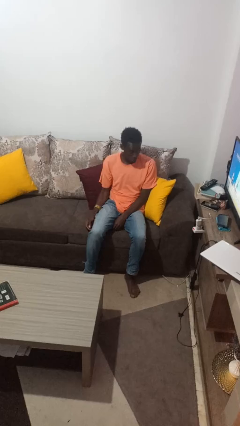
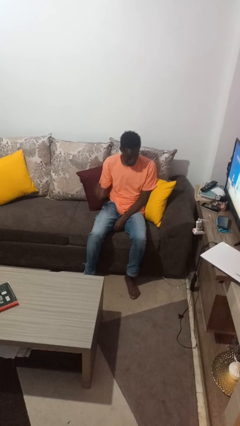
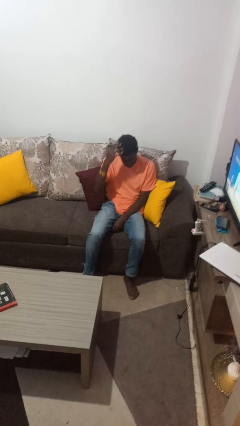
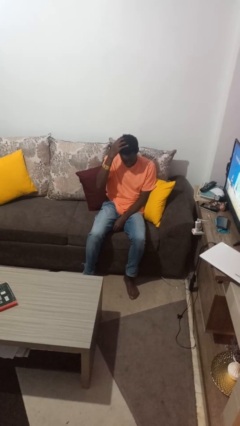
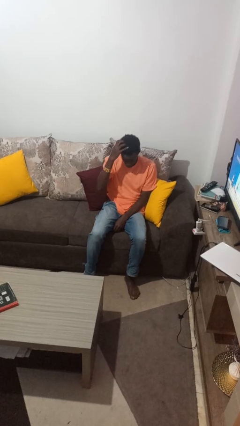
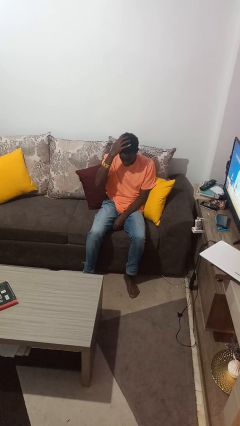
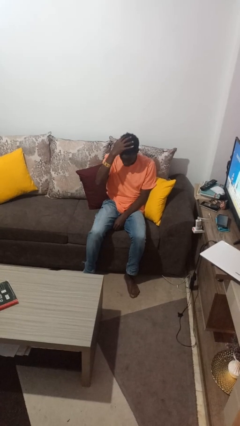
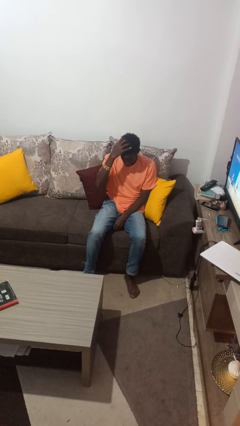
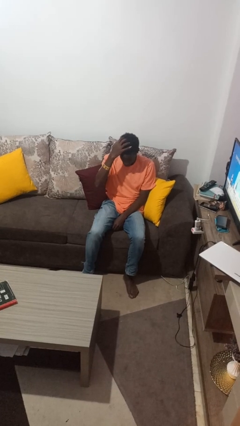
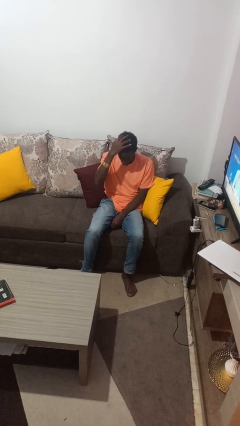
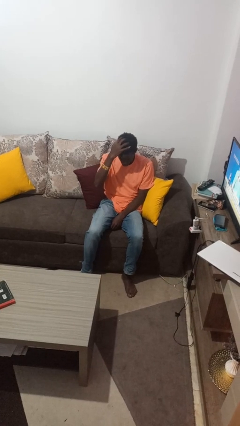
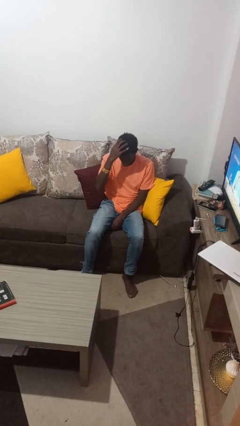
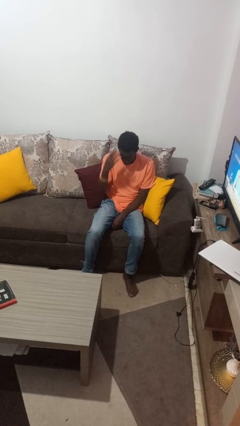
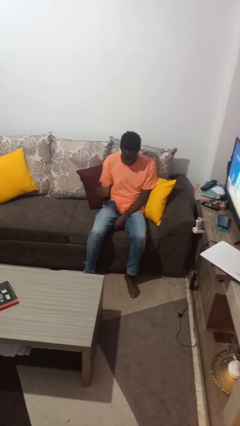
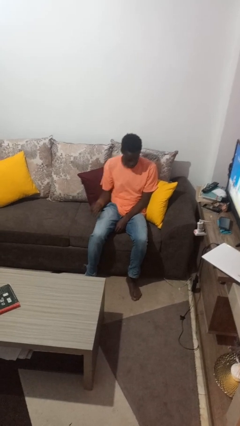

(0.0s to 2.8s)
person strokes hair

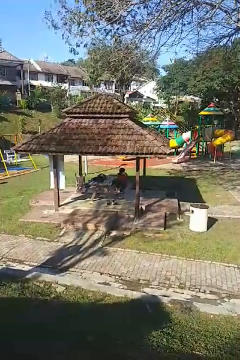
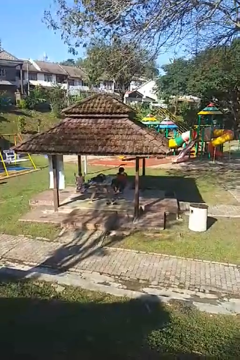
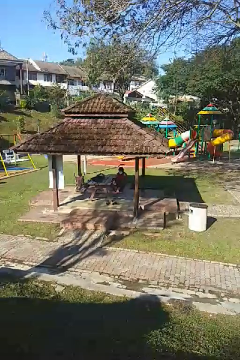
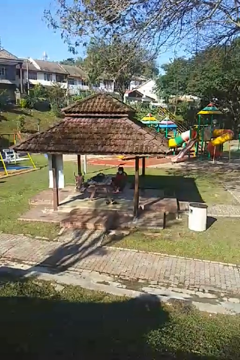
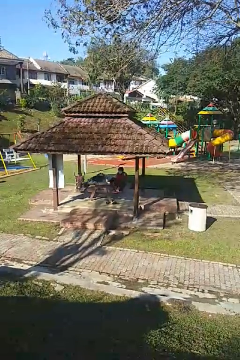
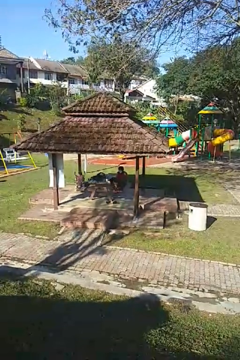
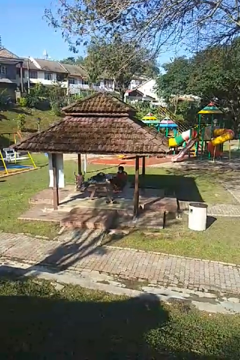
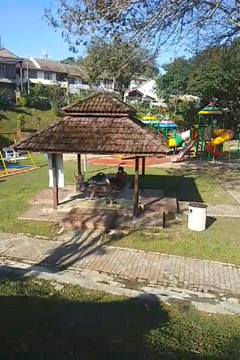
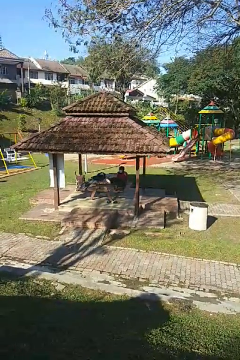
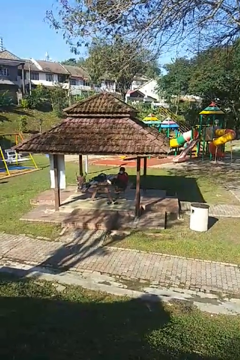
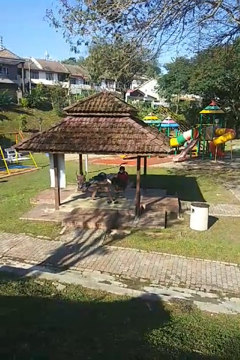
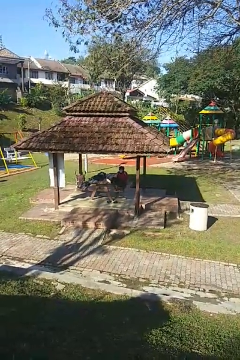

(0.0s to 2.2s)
person puts feet up

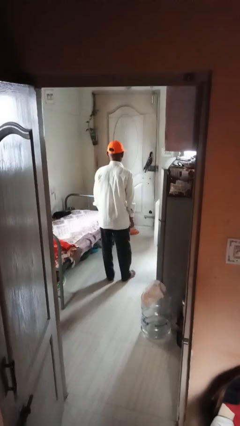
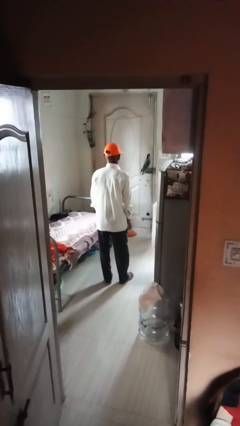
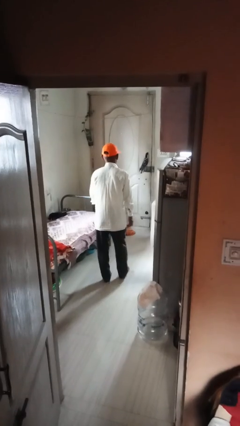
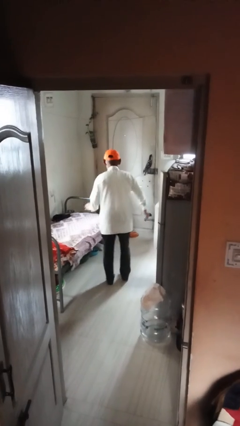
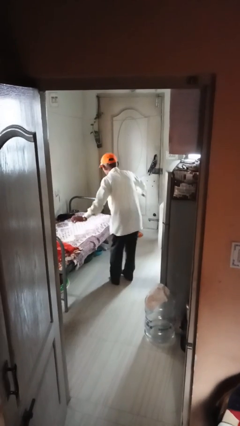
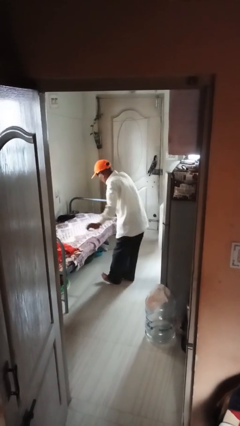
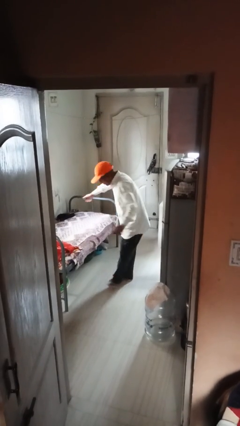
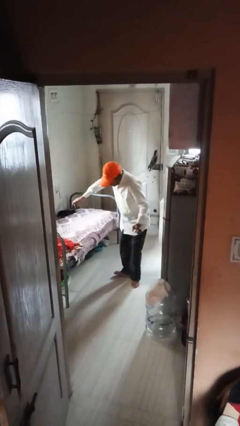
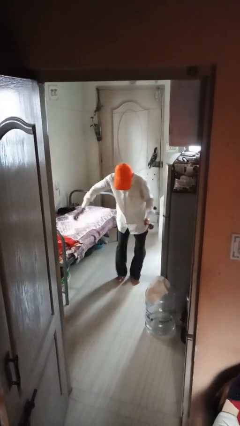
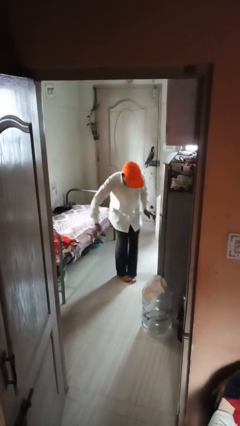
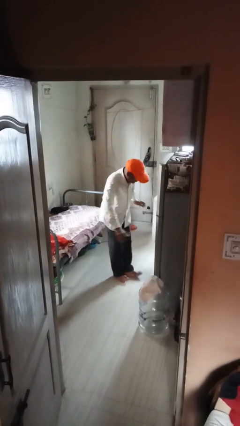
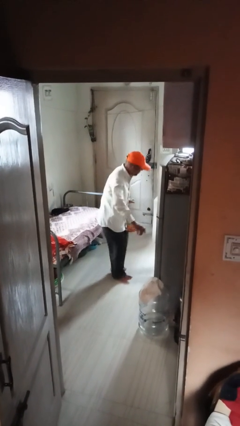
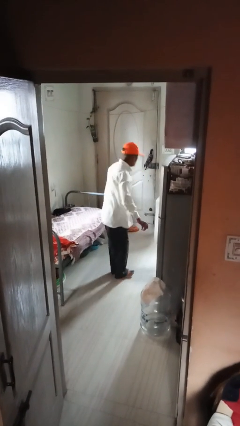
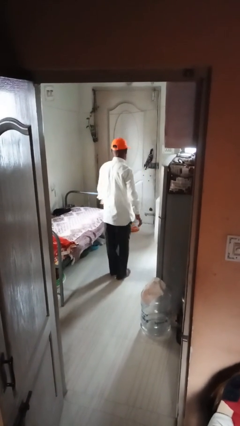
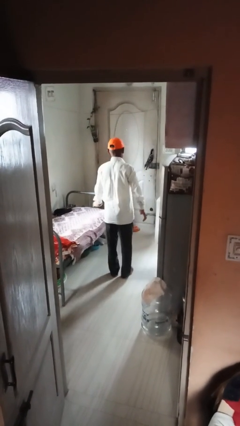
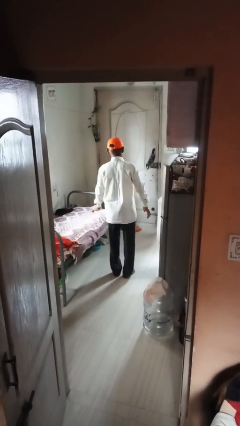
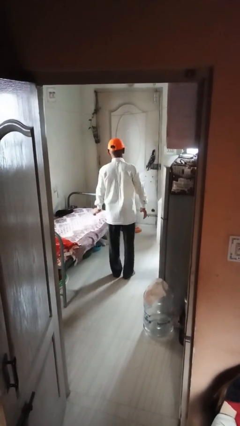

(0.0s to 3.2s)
person twirls

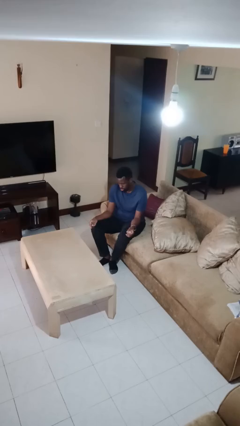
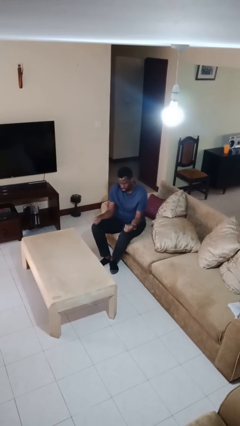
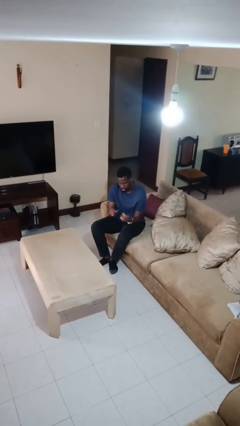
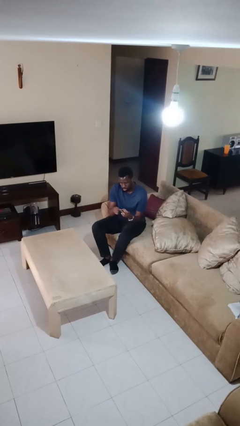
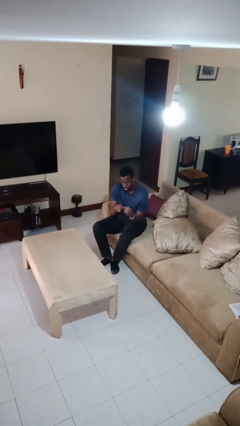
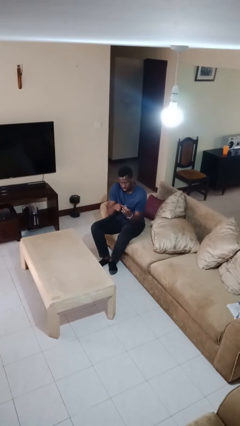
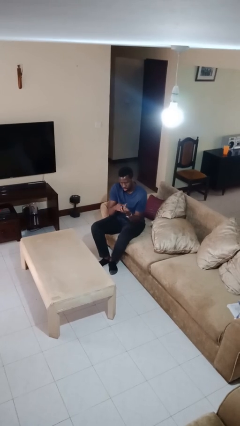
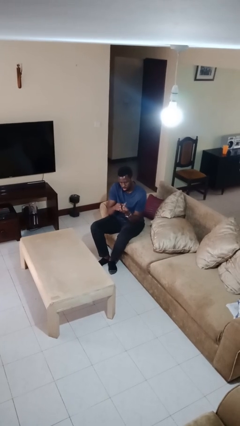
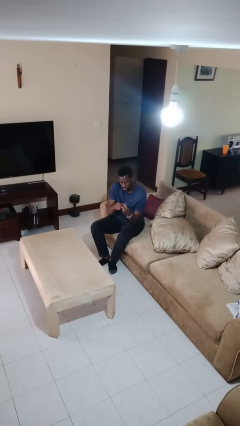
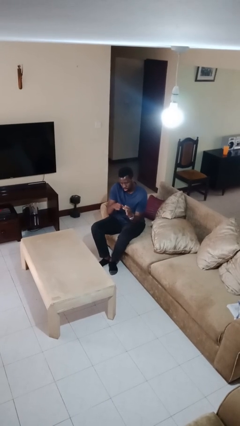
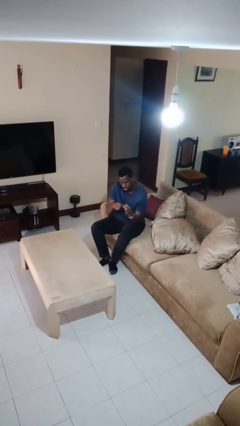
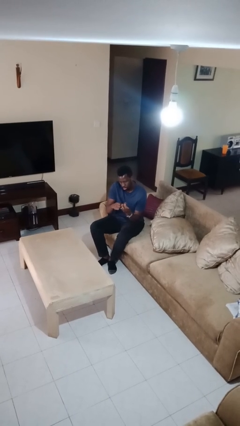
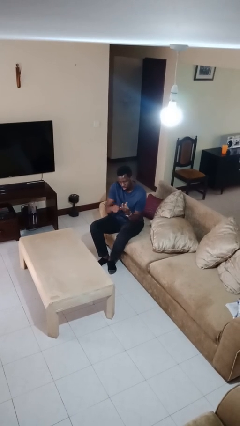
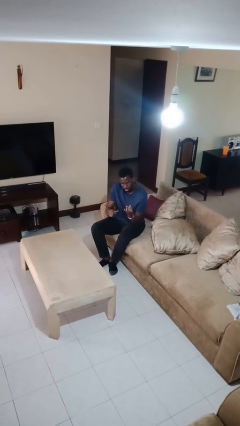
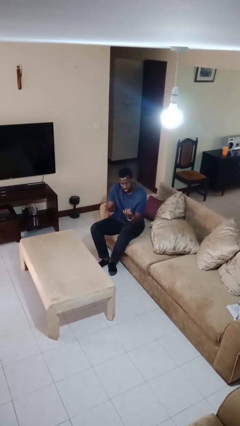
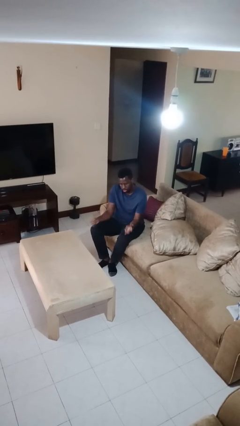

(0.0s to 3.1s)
person files fingernails

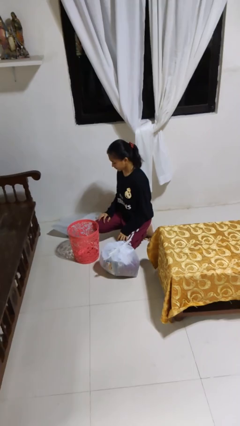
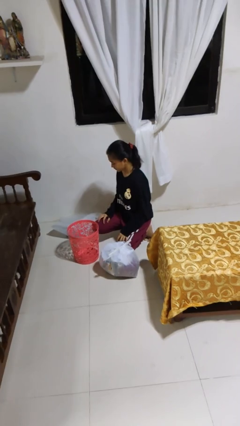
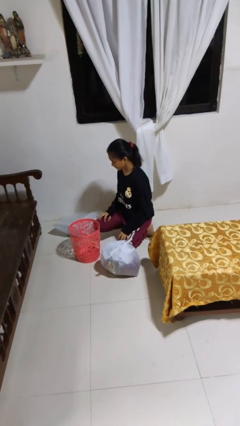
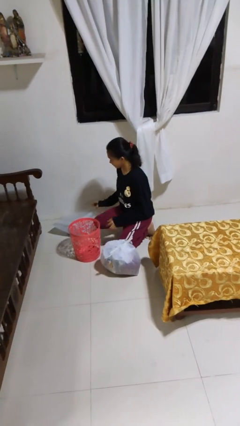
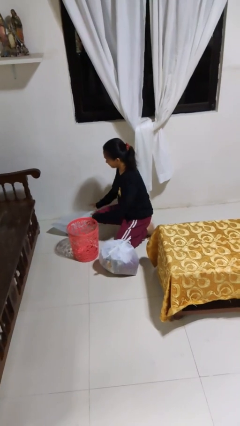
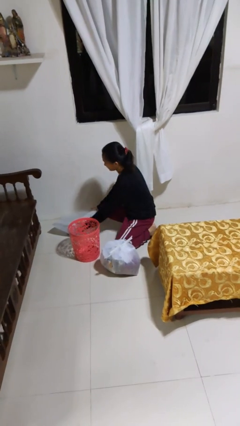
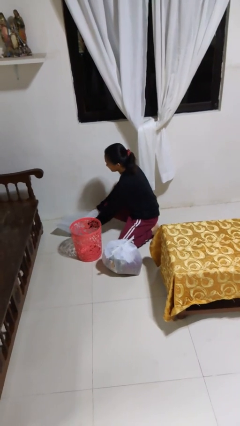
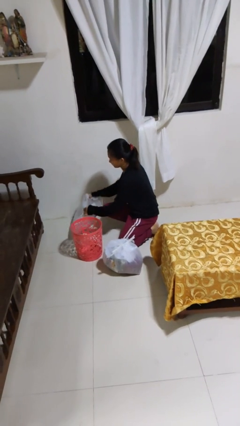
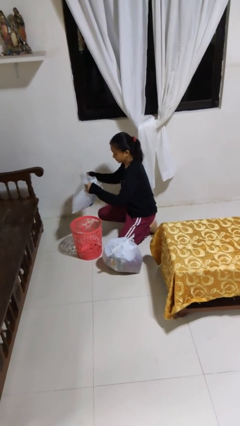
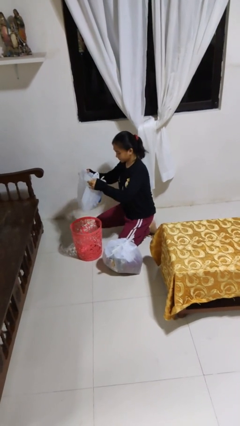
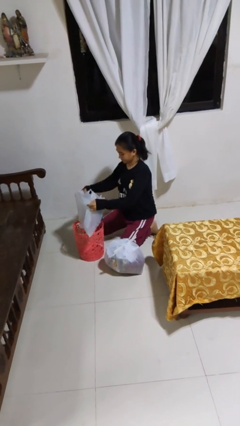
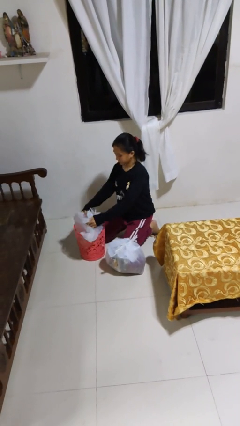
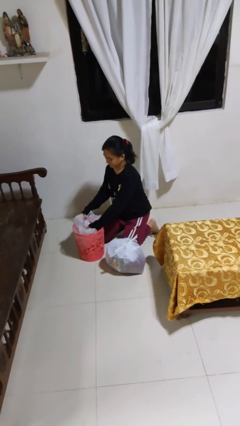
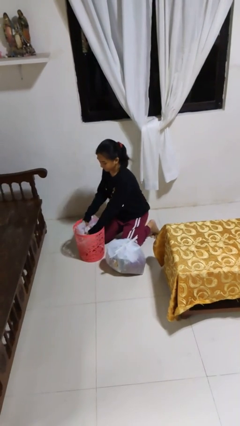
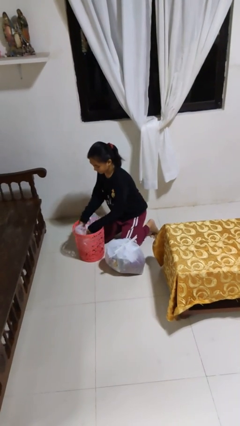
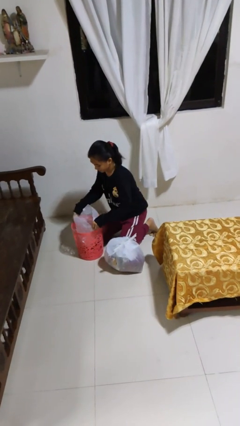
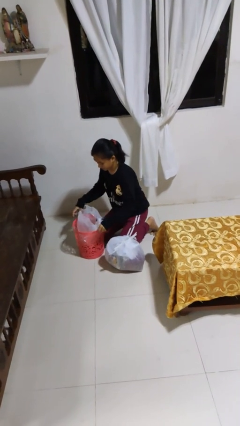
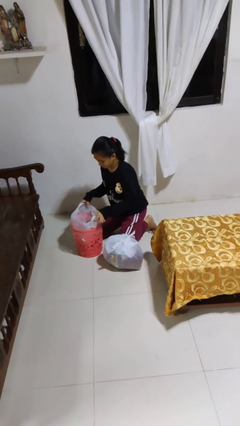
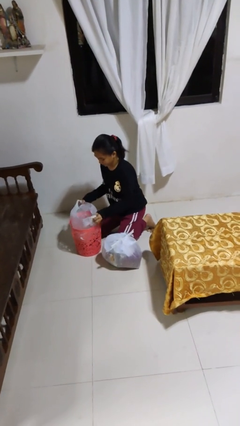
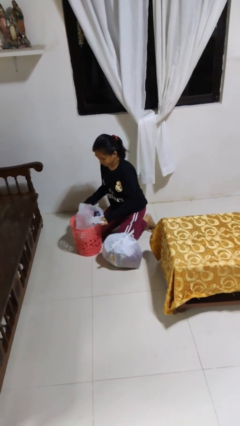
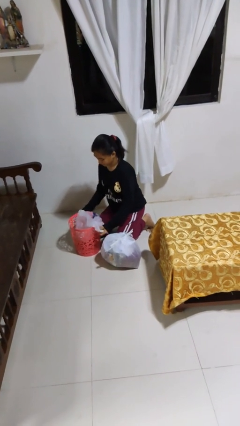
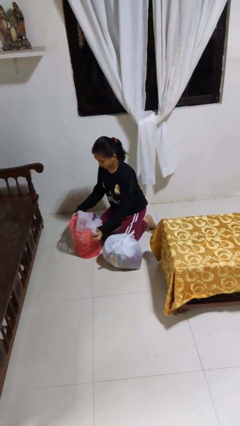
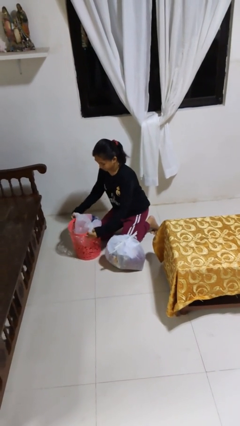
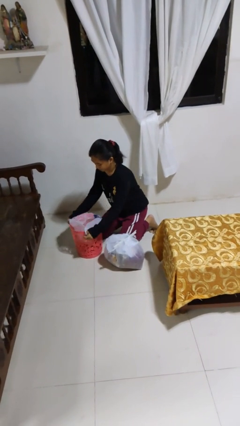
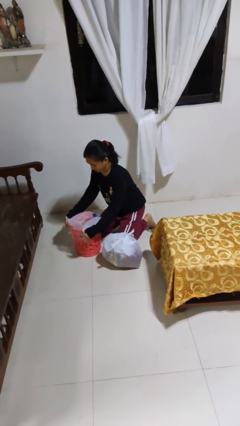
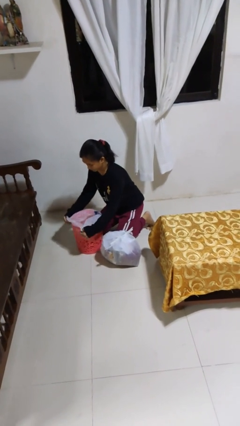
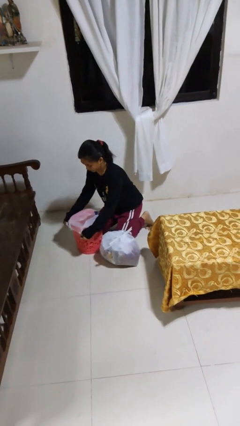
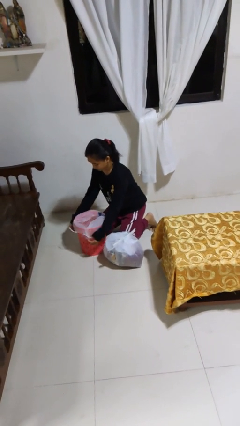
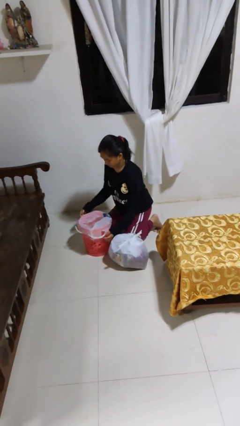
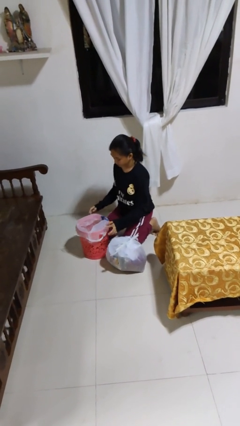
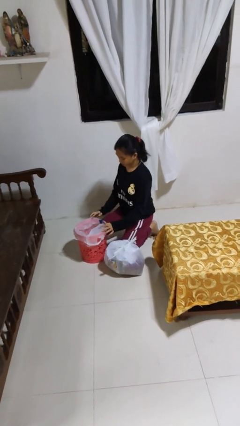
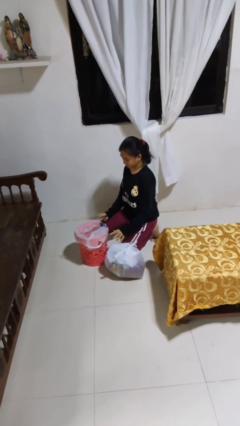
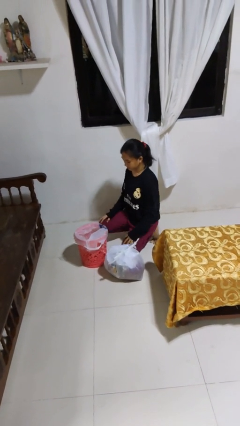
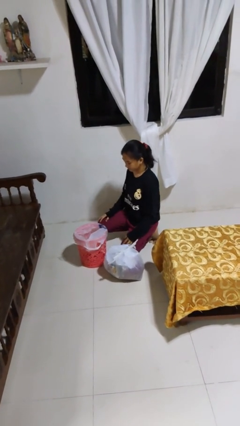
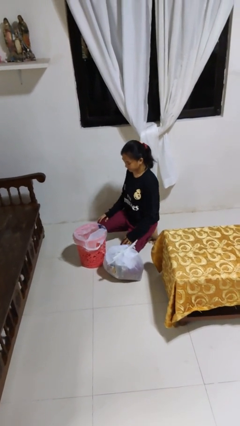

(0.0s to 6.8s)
person inserts trashbag into trashcan
